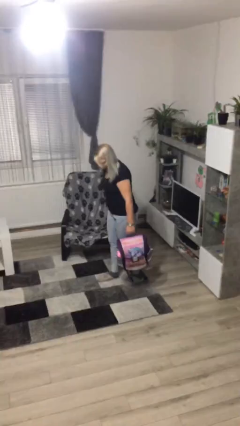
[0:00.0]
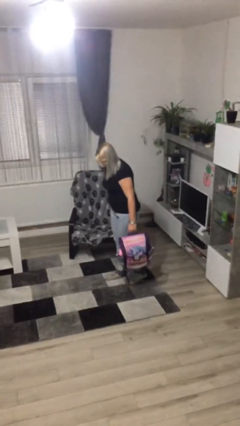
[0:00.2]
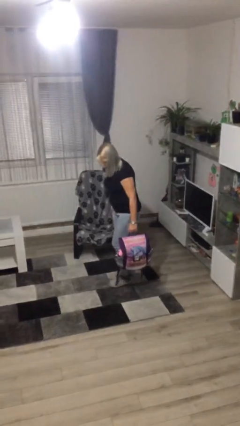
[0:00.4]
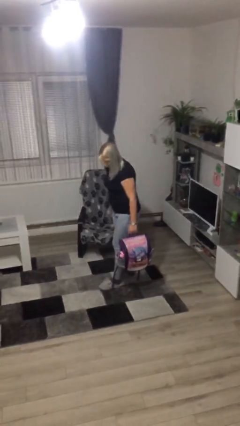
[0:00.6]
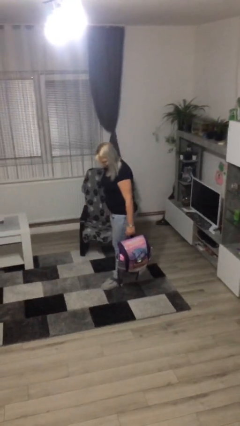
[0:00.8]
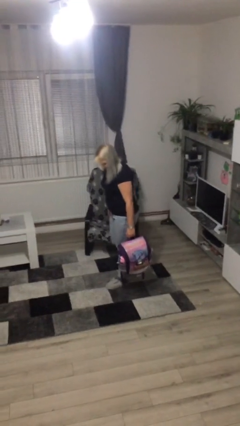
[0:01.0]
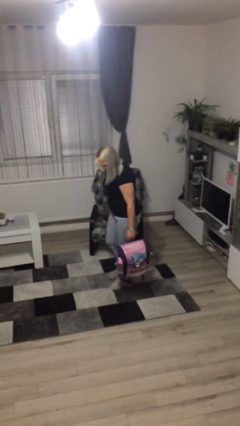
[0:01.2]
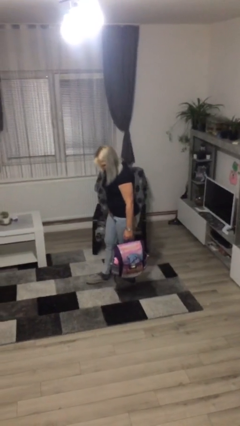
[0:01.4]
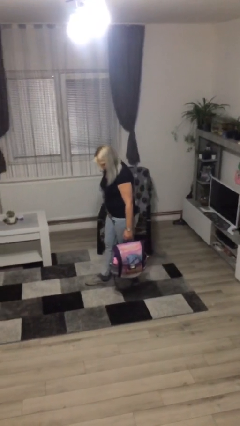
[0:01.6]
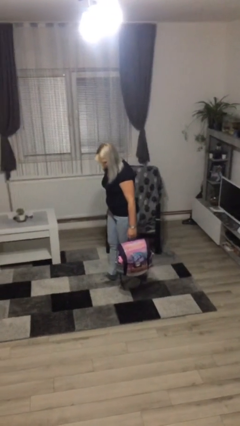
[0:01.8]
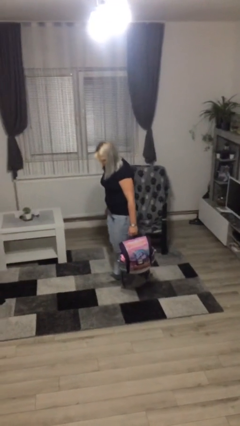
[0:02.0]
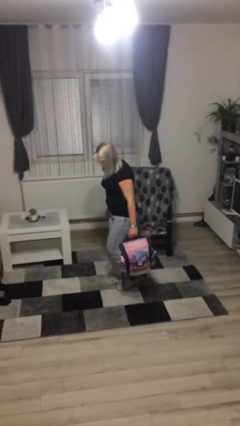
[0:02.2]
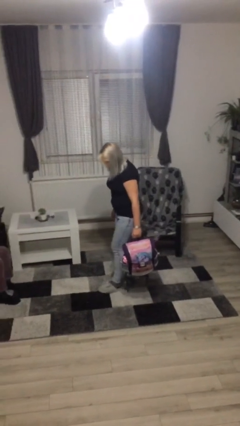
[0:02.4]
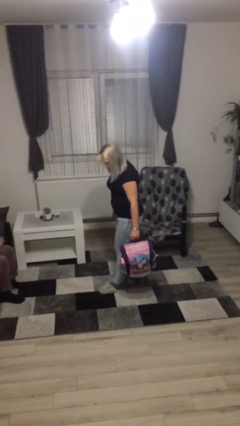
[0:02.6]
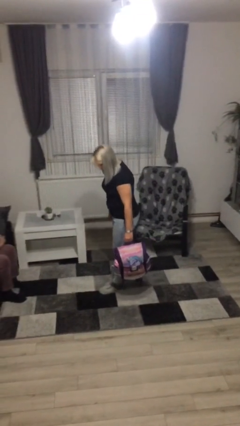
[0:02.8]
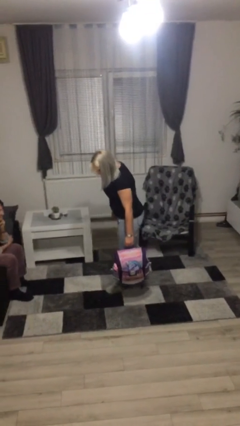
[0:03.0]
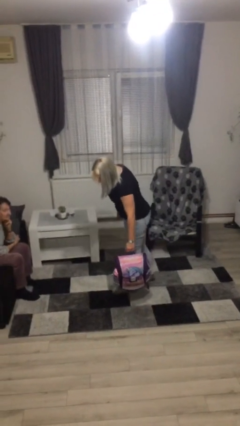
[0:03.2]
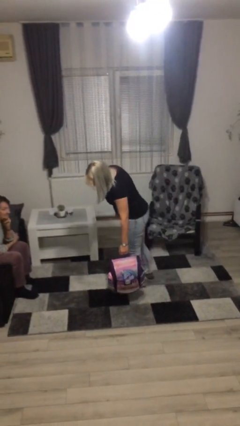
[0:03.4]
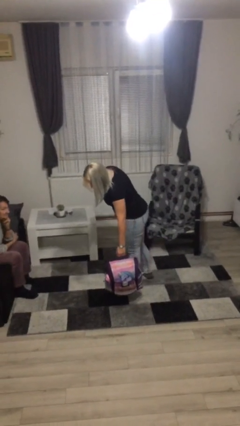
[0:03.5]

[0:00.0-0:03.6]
person carries heavy object

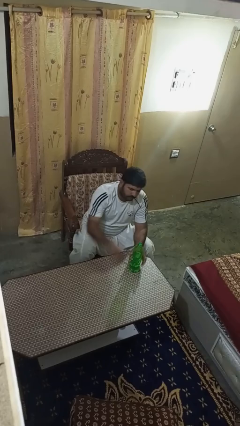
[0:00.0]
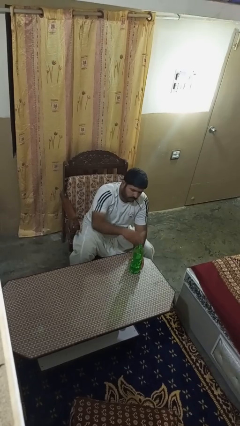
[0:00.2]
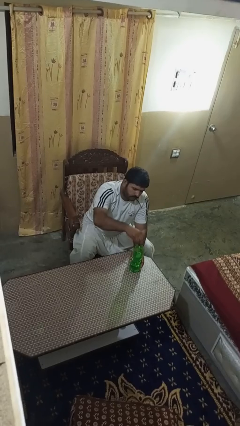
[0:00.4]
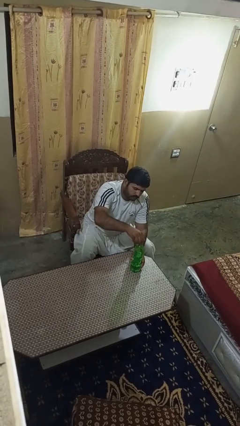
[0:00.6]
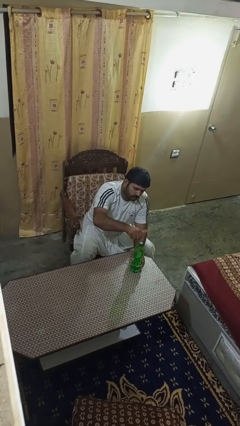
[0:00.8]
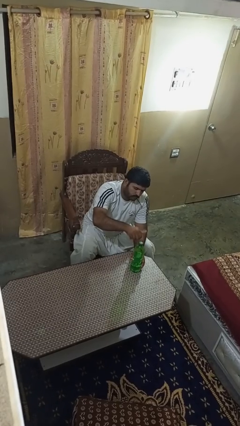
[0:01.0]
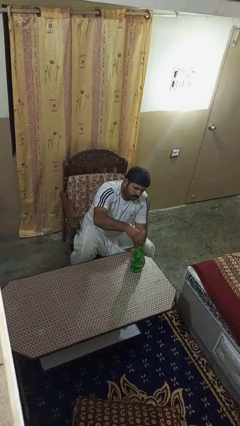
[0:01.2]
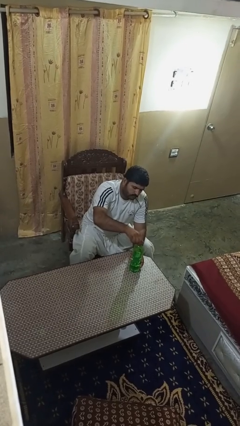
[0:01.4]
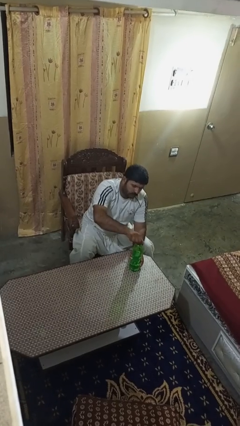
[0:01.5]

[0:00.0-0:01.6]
person screws lid to bottle

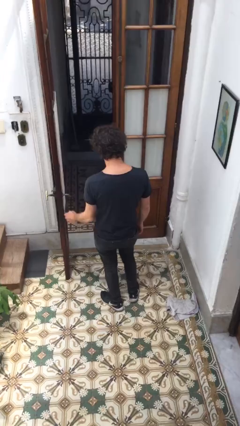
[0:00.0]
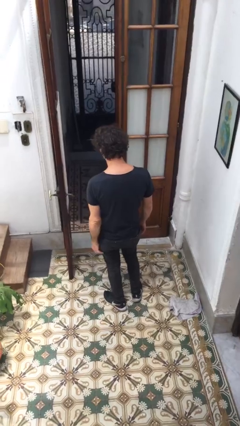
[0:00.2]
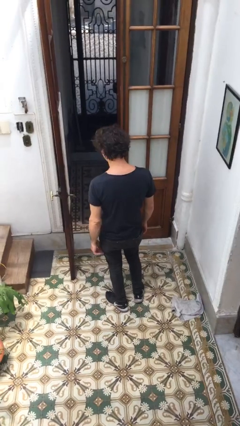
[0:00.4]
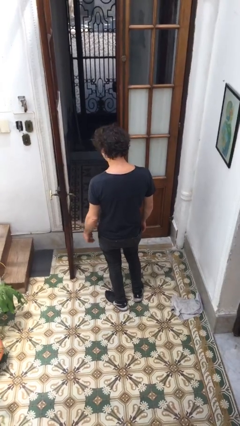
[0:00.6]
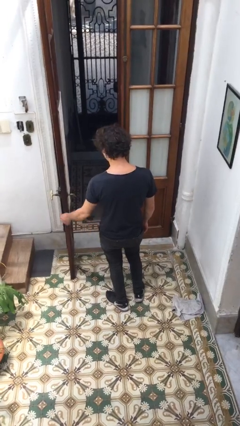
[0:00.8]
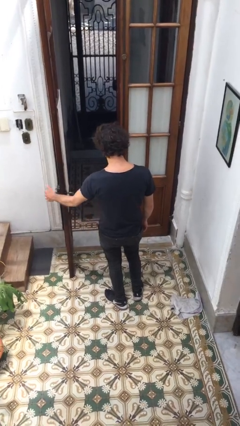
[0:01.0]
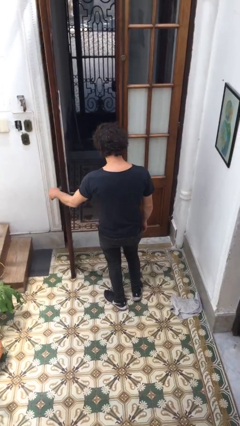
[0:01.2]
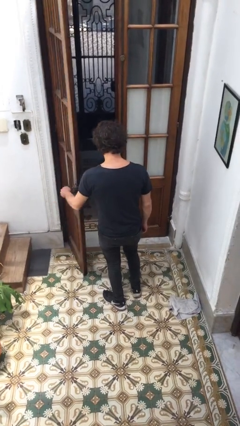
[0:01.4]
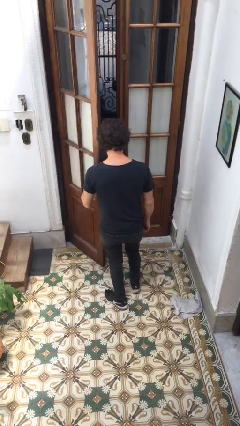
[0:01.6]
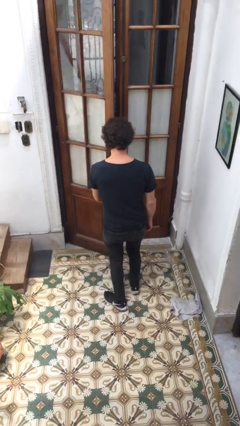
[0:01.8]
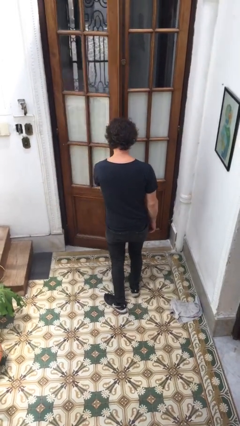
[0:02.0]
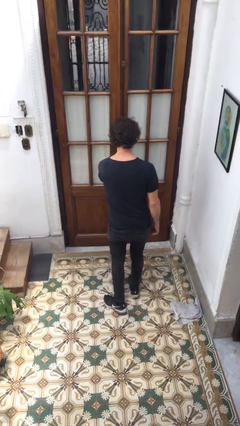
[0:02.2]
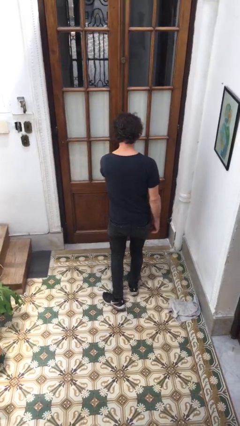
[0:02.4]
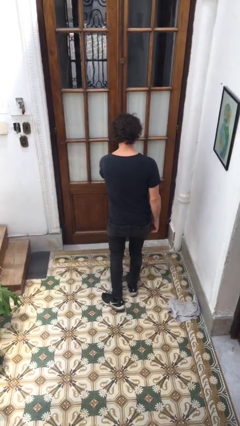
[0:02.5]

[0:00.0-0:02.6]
person closes facility door

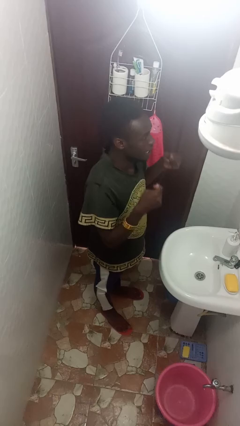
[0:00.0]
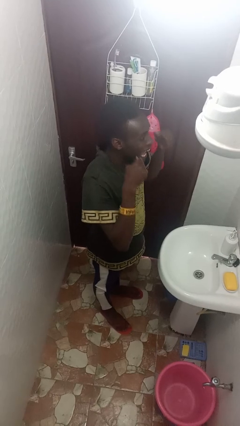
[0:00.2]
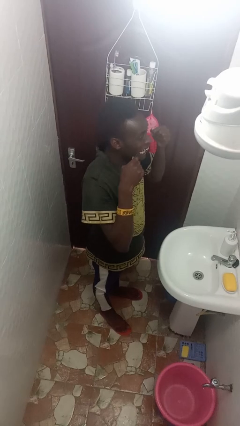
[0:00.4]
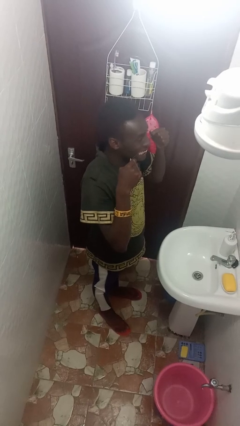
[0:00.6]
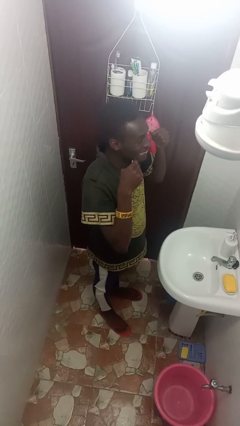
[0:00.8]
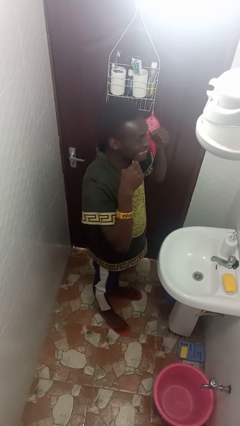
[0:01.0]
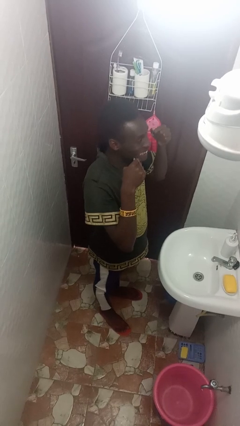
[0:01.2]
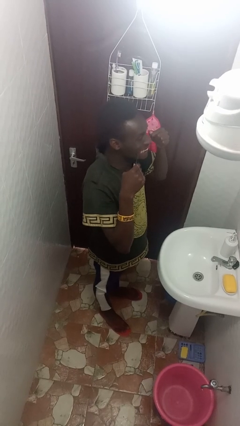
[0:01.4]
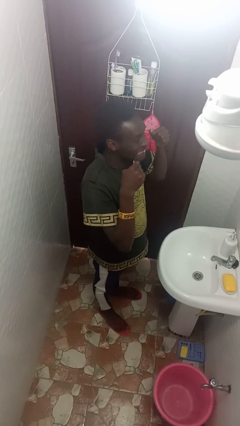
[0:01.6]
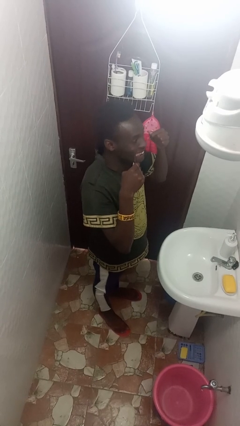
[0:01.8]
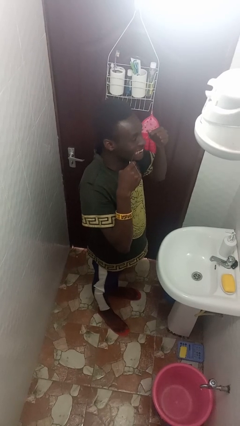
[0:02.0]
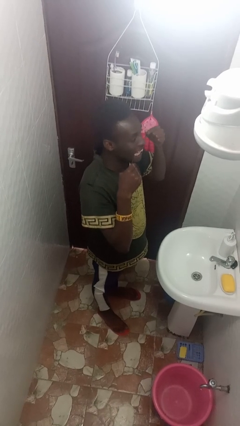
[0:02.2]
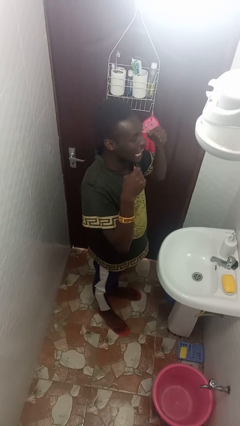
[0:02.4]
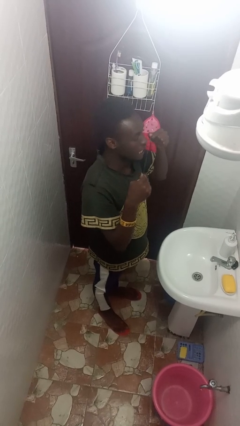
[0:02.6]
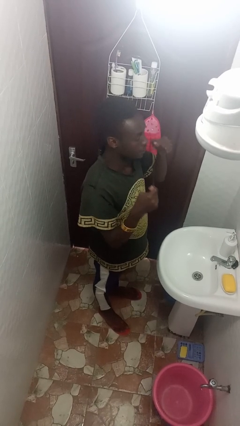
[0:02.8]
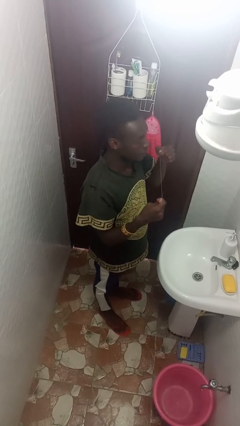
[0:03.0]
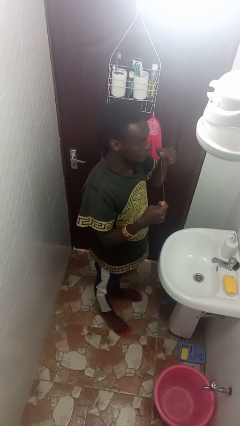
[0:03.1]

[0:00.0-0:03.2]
person flosses

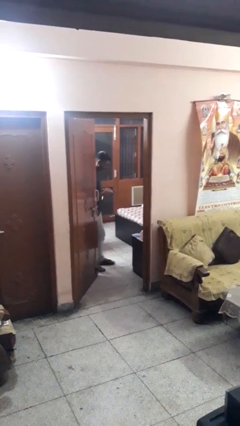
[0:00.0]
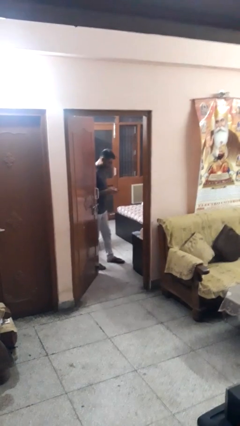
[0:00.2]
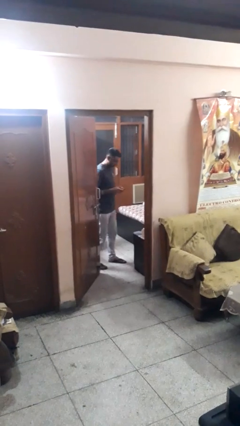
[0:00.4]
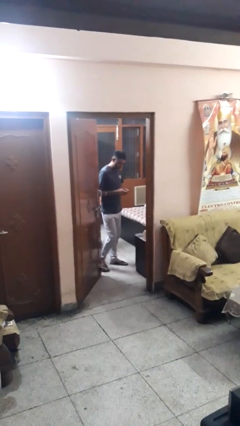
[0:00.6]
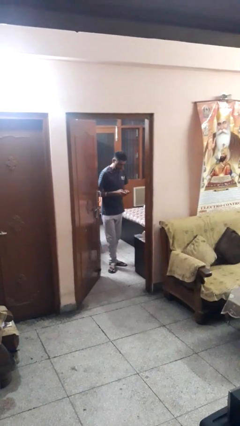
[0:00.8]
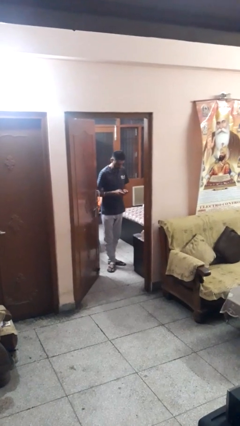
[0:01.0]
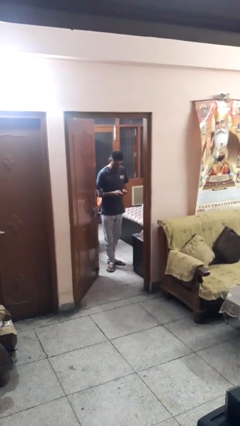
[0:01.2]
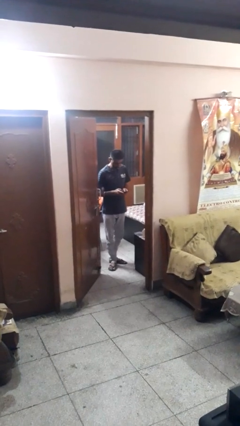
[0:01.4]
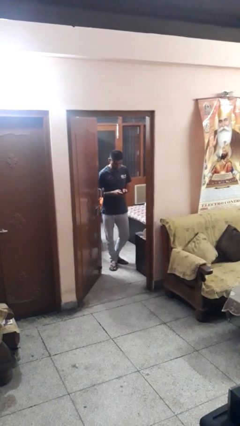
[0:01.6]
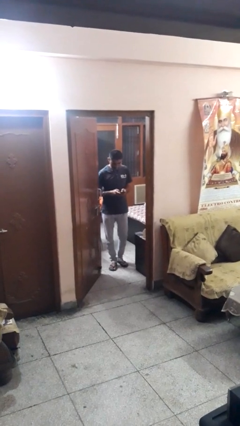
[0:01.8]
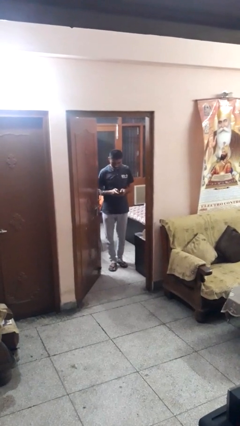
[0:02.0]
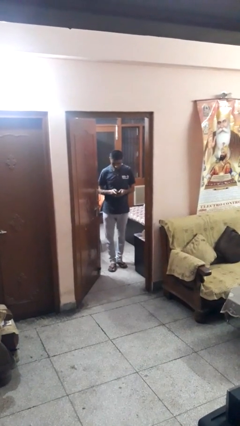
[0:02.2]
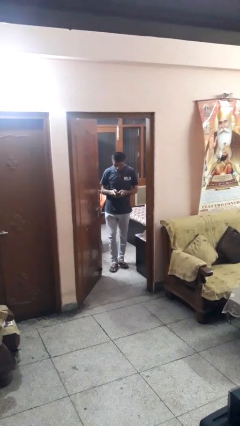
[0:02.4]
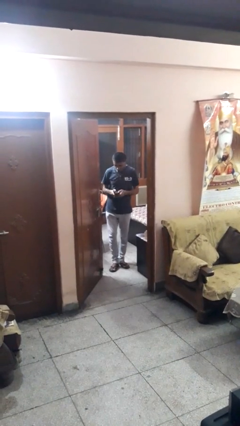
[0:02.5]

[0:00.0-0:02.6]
person enters scene through structure

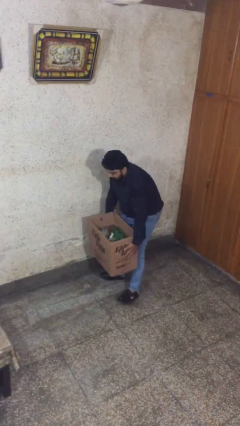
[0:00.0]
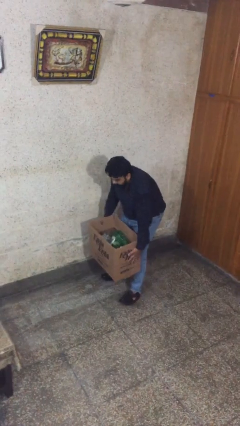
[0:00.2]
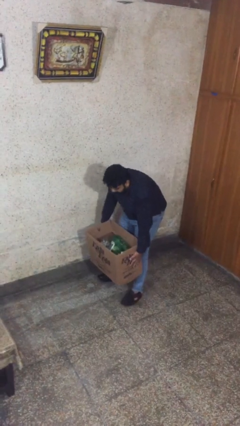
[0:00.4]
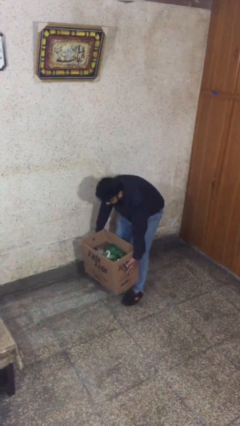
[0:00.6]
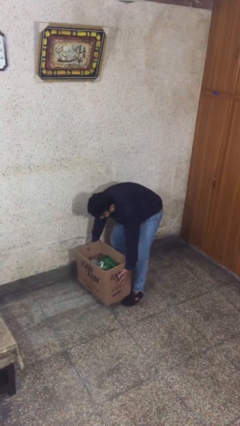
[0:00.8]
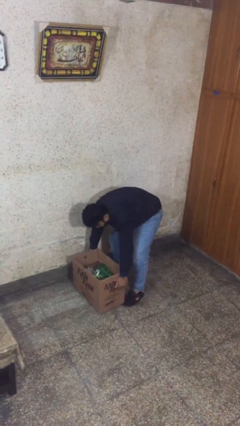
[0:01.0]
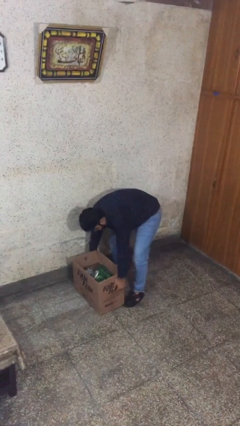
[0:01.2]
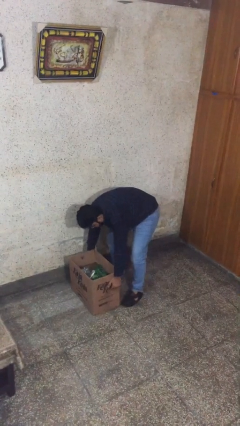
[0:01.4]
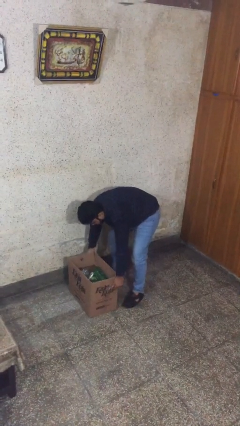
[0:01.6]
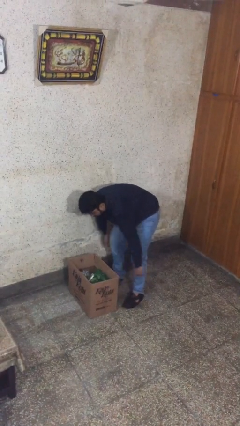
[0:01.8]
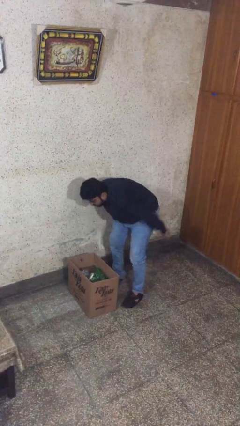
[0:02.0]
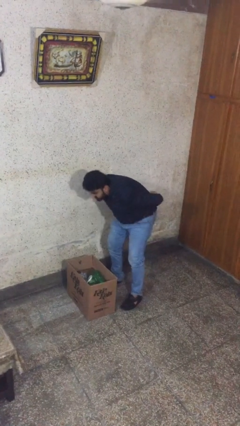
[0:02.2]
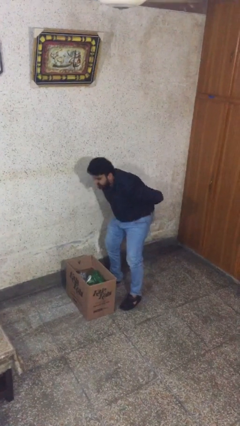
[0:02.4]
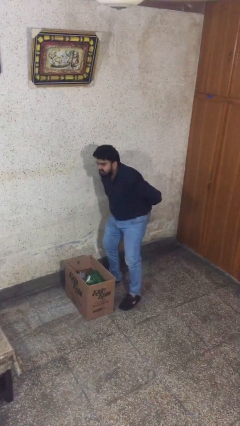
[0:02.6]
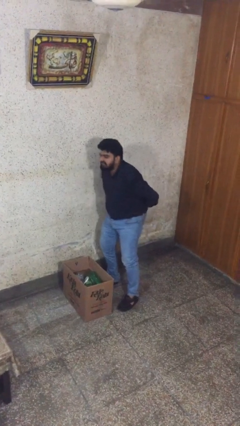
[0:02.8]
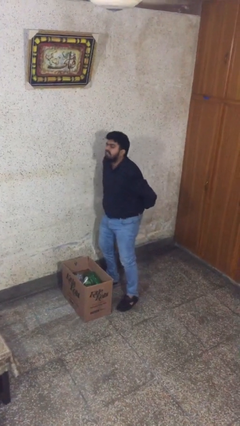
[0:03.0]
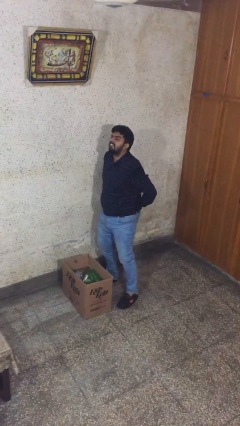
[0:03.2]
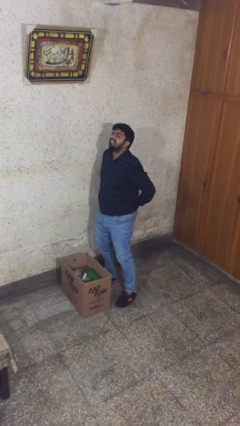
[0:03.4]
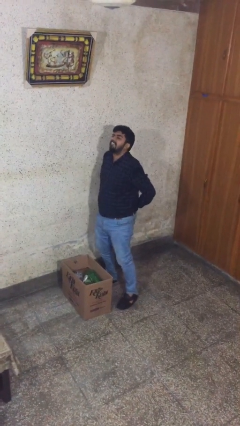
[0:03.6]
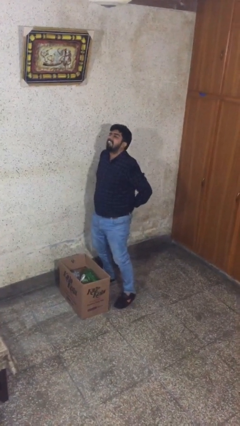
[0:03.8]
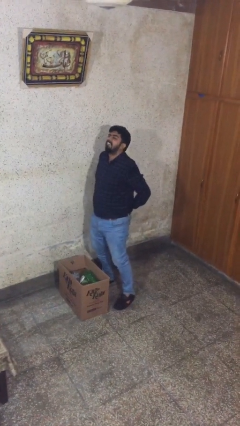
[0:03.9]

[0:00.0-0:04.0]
person puts down object on floor
